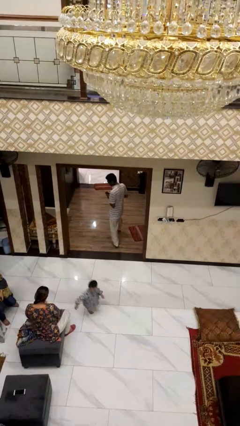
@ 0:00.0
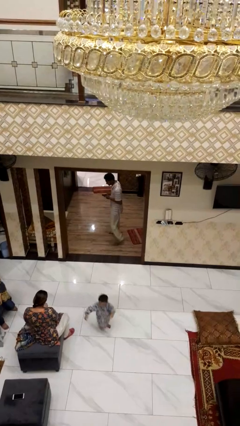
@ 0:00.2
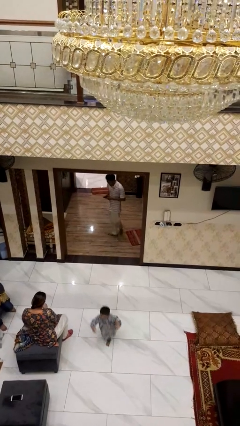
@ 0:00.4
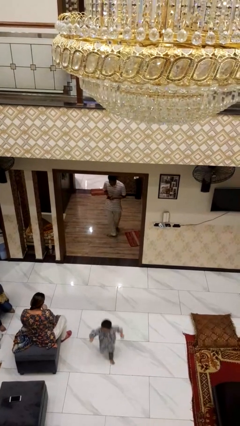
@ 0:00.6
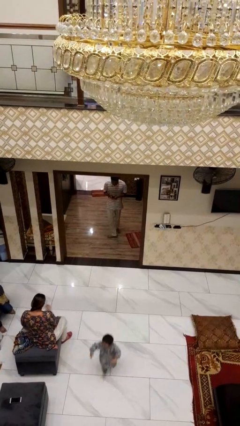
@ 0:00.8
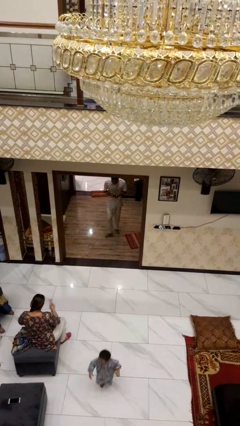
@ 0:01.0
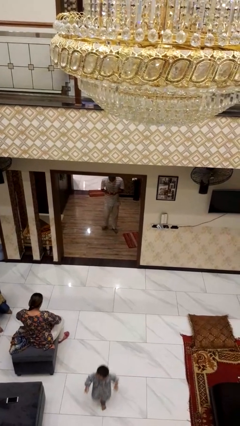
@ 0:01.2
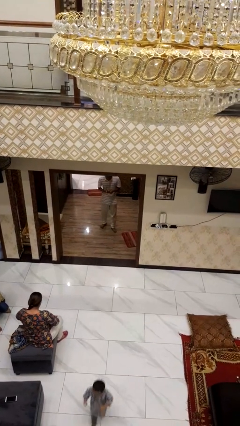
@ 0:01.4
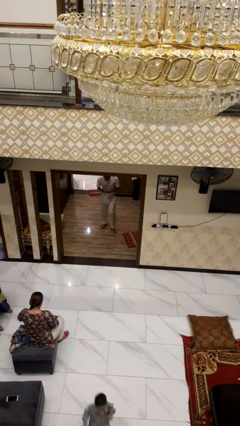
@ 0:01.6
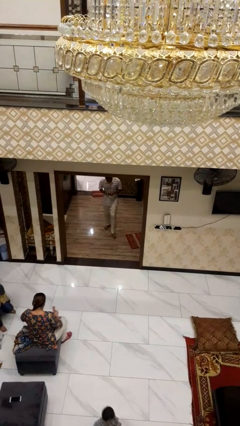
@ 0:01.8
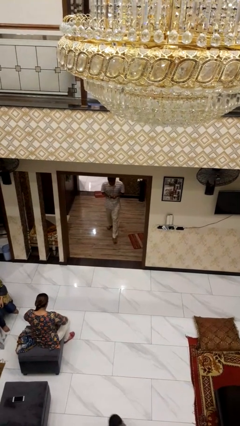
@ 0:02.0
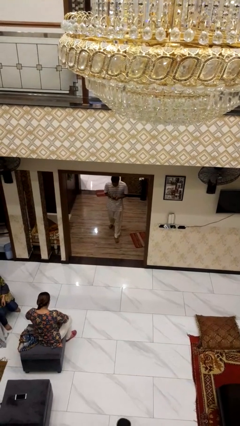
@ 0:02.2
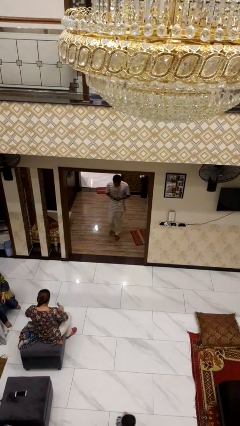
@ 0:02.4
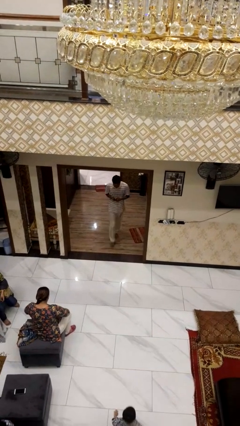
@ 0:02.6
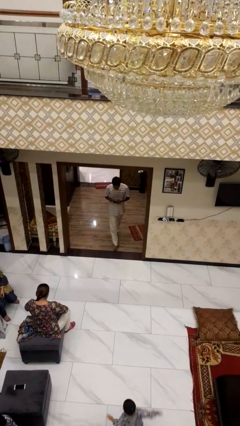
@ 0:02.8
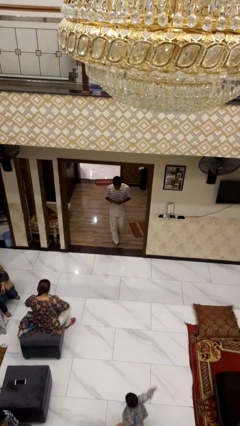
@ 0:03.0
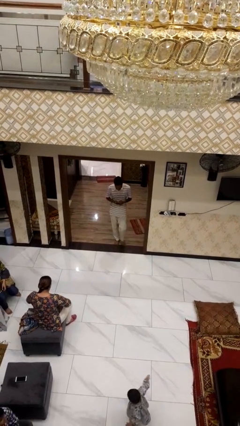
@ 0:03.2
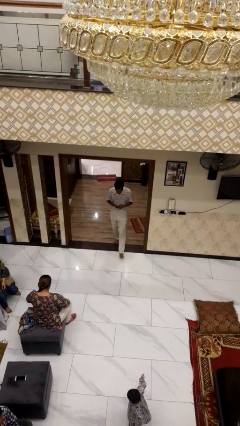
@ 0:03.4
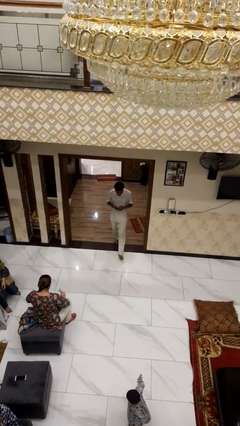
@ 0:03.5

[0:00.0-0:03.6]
person exits scene through structure

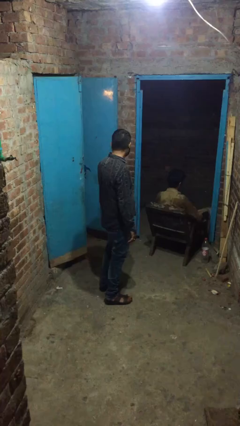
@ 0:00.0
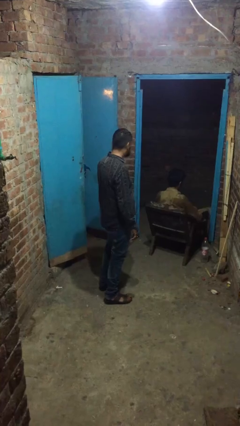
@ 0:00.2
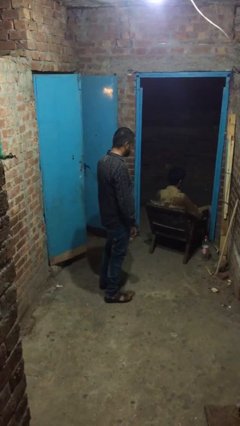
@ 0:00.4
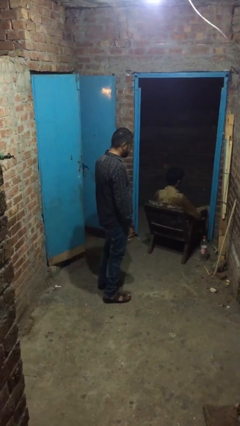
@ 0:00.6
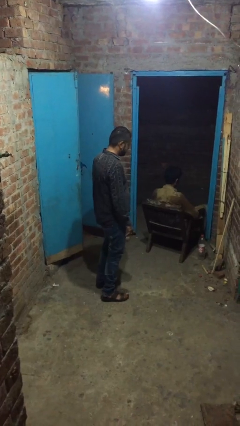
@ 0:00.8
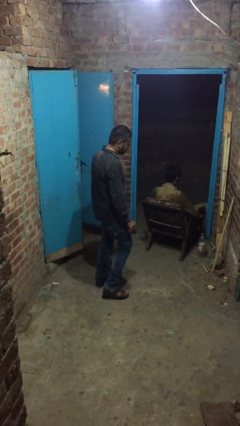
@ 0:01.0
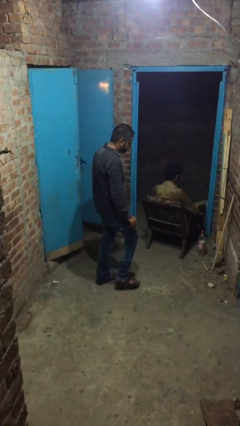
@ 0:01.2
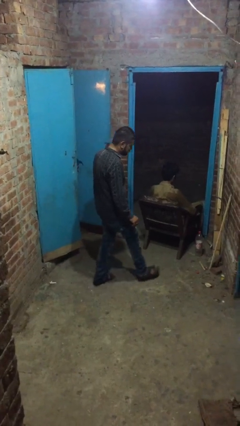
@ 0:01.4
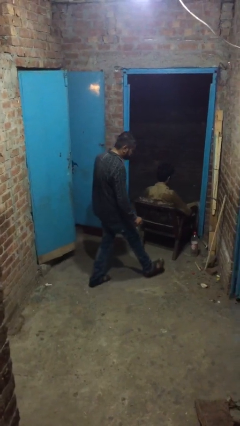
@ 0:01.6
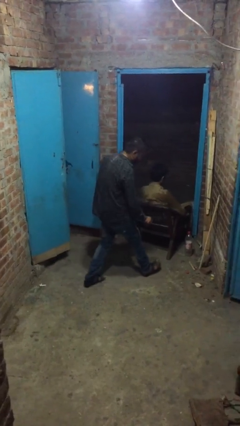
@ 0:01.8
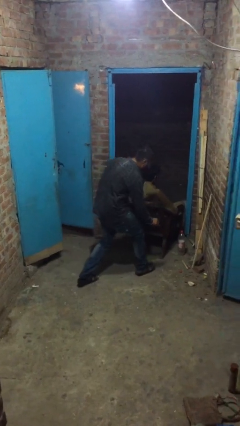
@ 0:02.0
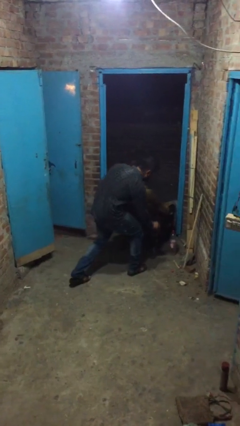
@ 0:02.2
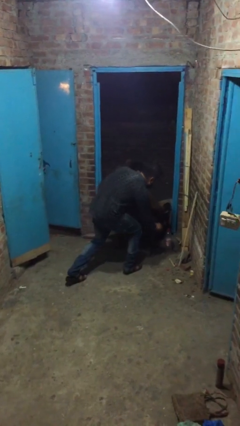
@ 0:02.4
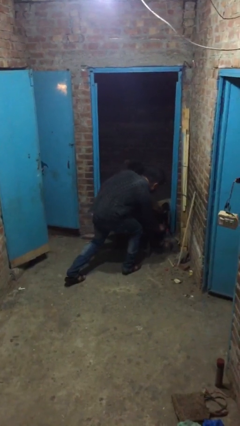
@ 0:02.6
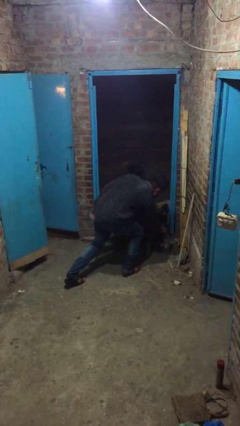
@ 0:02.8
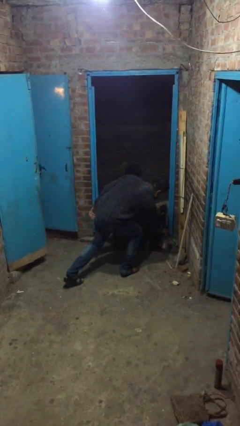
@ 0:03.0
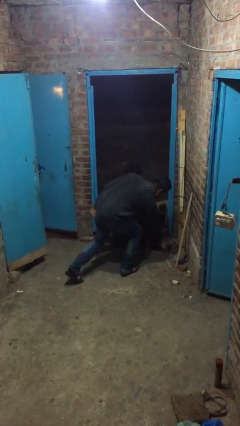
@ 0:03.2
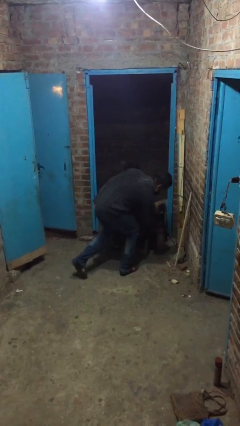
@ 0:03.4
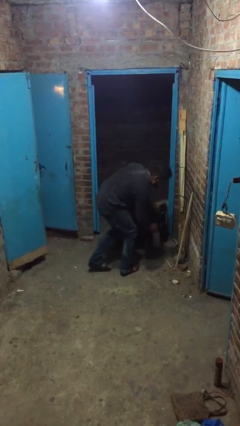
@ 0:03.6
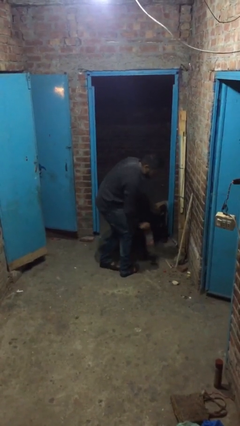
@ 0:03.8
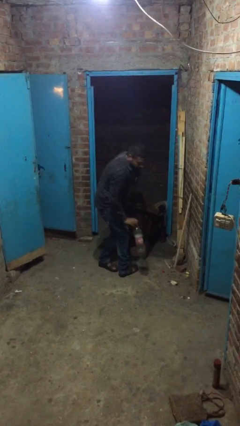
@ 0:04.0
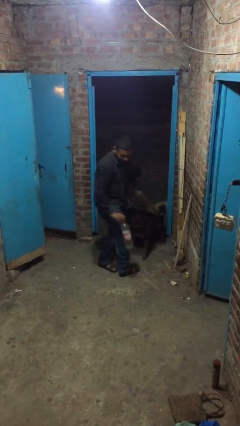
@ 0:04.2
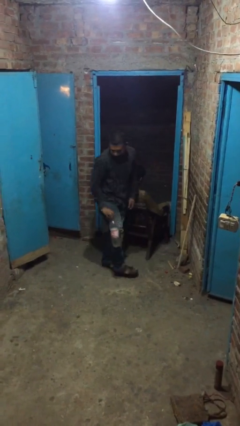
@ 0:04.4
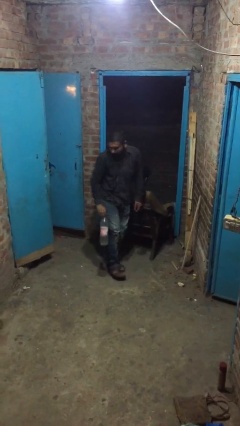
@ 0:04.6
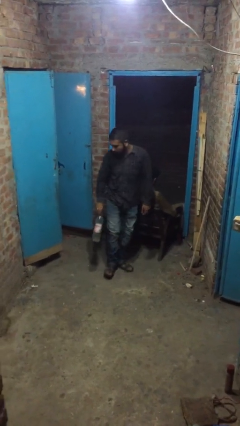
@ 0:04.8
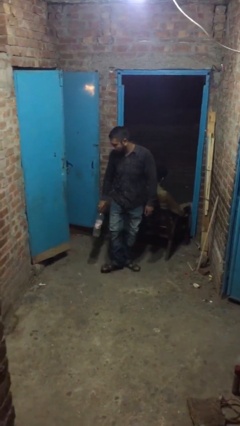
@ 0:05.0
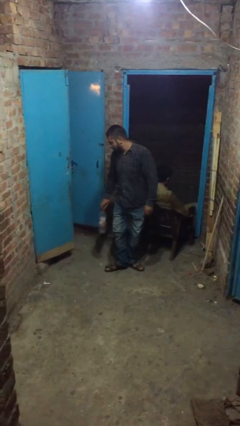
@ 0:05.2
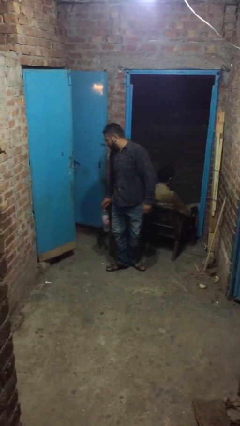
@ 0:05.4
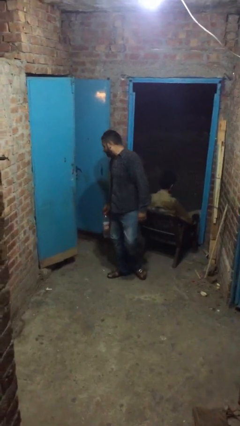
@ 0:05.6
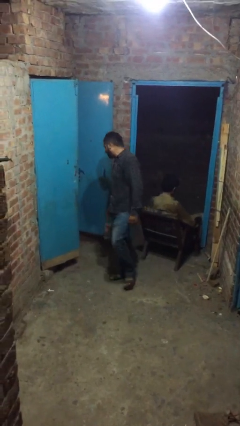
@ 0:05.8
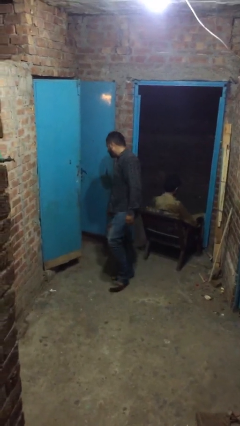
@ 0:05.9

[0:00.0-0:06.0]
person steals object from person

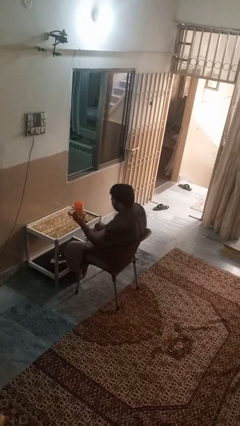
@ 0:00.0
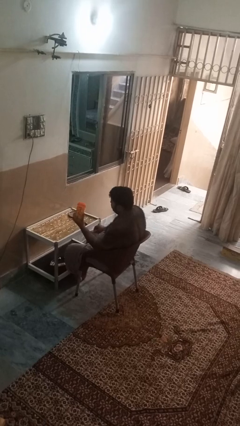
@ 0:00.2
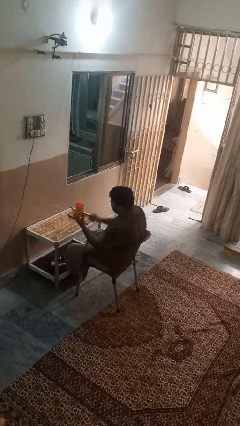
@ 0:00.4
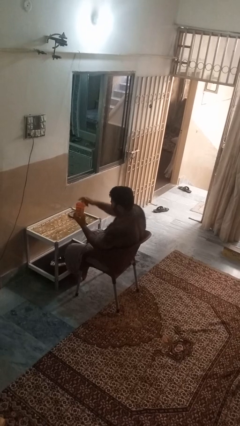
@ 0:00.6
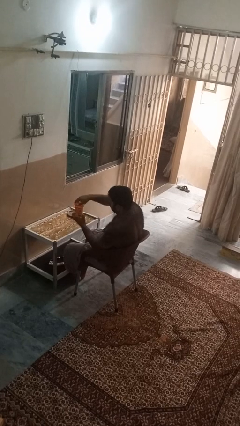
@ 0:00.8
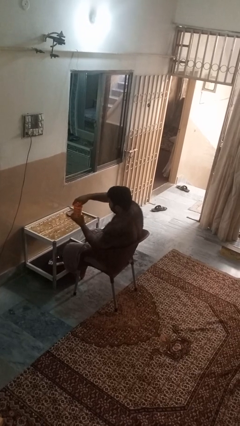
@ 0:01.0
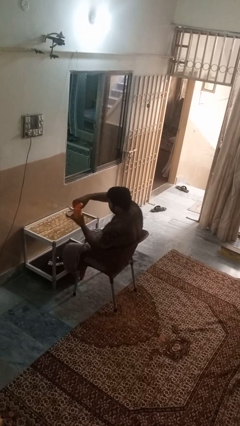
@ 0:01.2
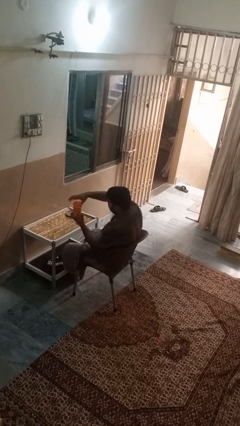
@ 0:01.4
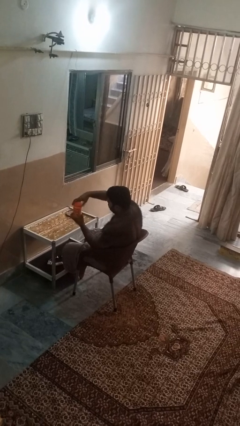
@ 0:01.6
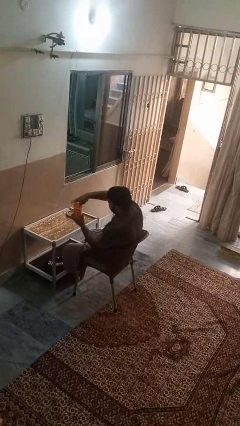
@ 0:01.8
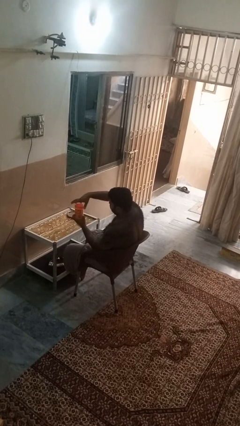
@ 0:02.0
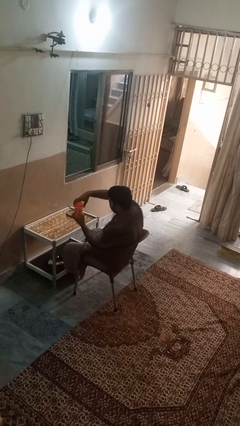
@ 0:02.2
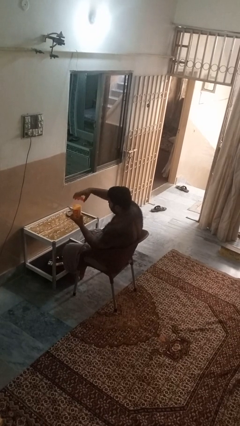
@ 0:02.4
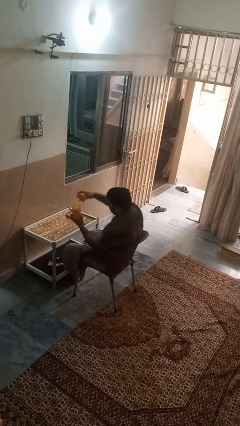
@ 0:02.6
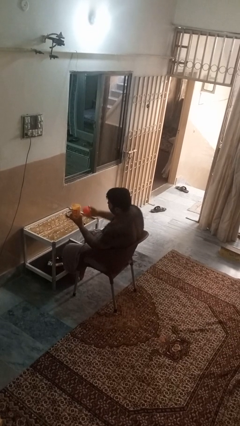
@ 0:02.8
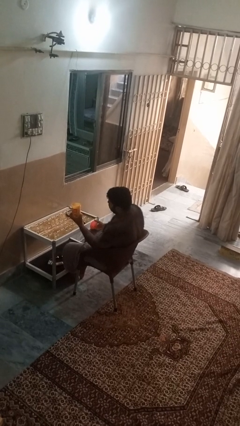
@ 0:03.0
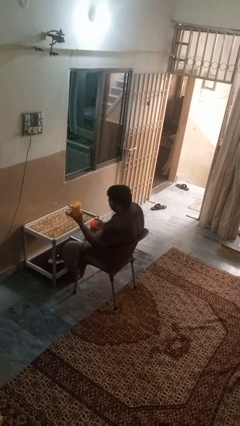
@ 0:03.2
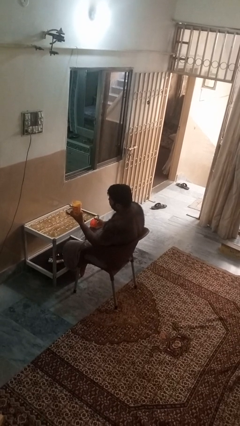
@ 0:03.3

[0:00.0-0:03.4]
person opens jar

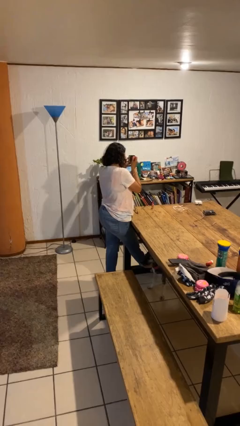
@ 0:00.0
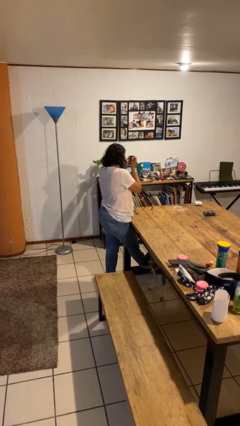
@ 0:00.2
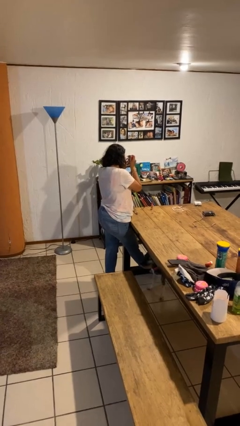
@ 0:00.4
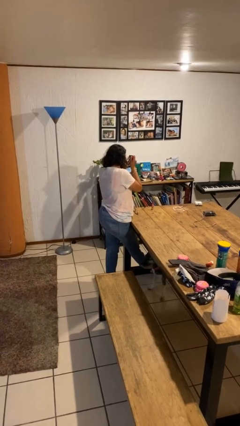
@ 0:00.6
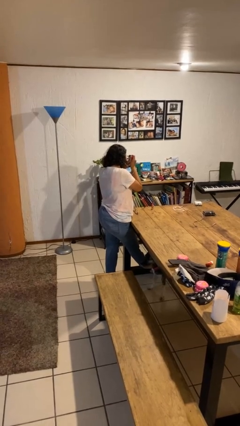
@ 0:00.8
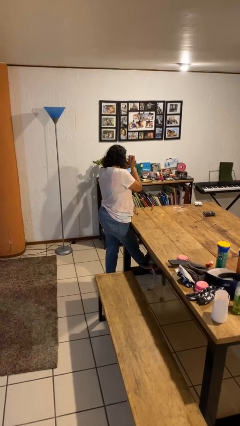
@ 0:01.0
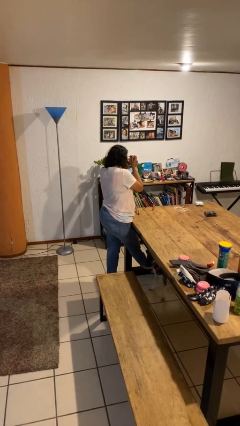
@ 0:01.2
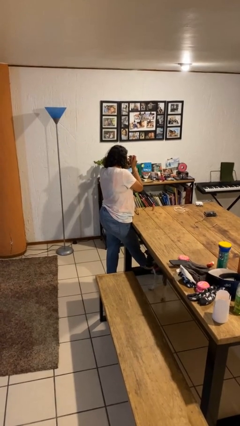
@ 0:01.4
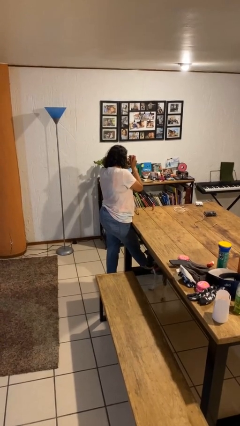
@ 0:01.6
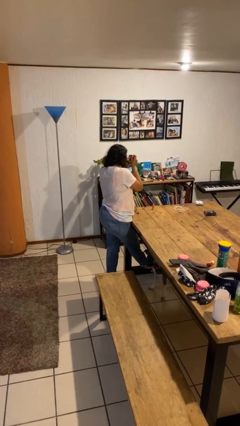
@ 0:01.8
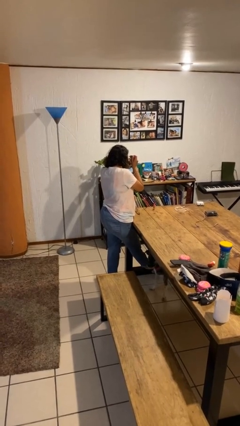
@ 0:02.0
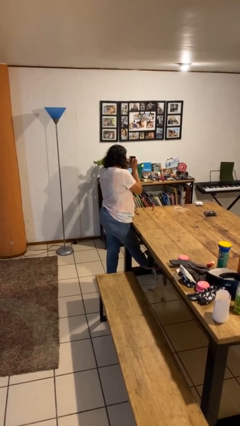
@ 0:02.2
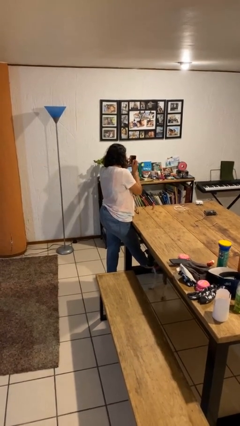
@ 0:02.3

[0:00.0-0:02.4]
person applies eye makeup

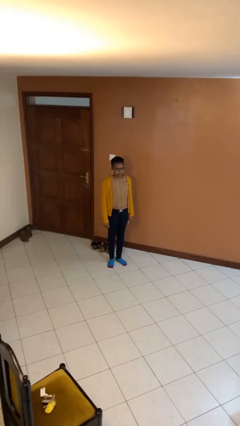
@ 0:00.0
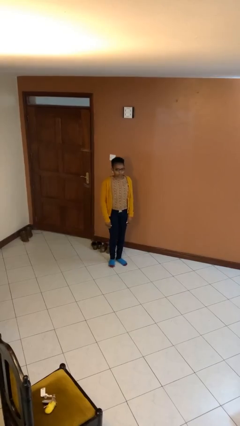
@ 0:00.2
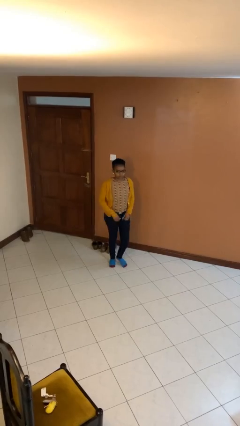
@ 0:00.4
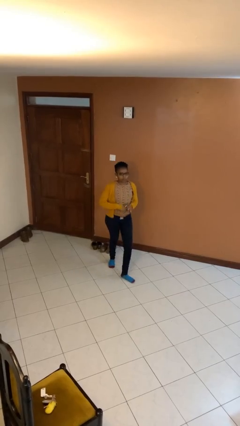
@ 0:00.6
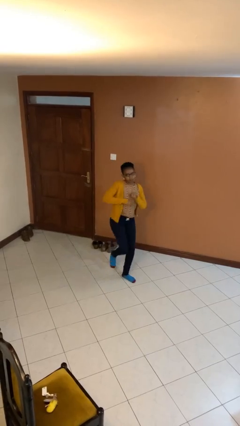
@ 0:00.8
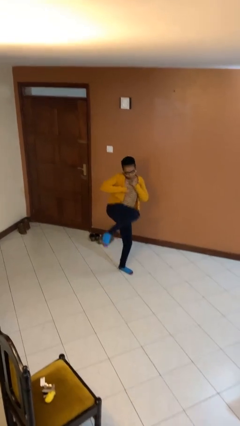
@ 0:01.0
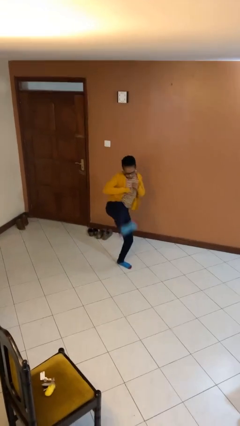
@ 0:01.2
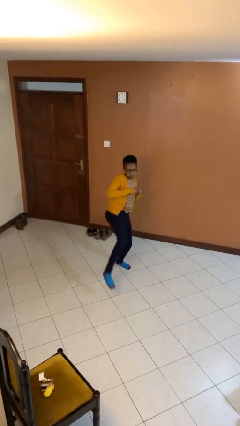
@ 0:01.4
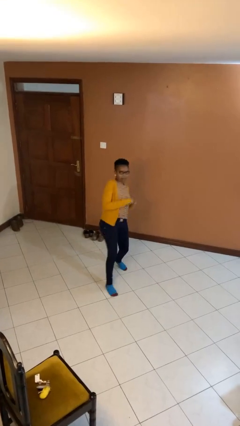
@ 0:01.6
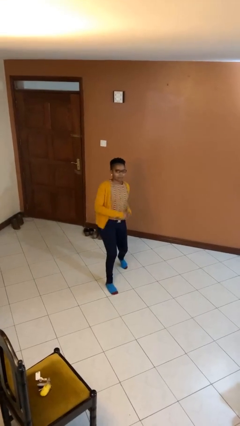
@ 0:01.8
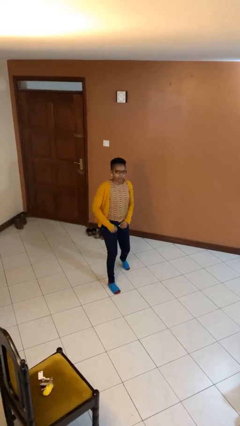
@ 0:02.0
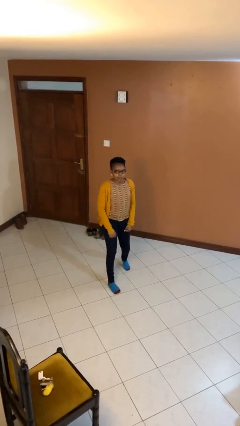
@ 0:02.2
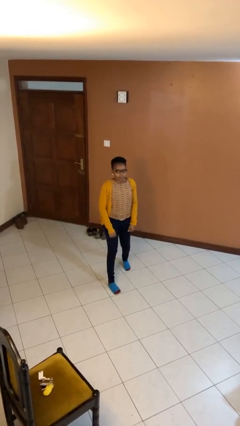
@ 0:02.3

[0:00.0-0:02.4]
person karate kicks
